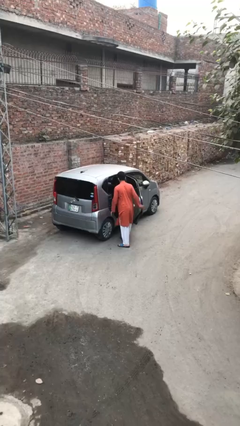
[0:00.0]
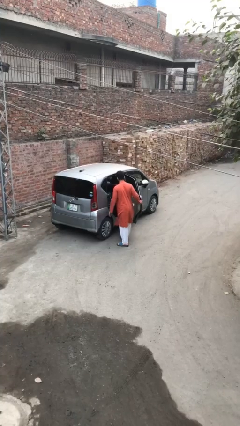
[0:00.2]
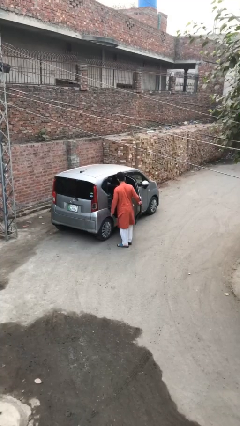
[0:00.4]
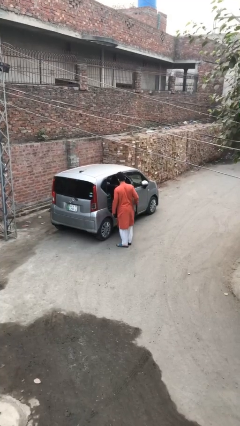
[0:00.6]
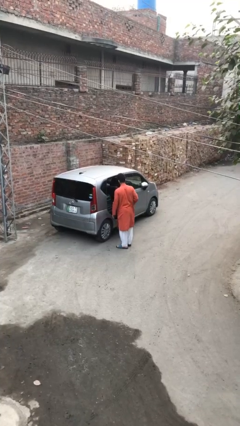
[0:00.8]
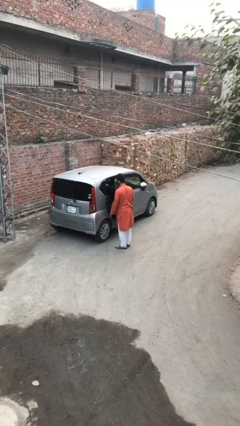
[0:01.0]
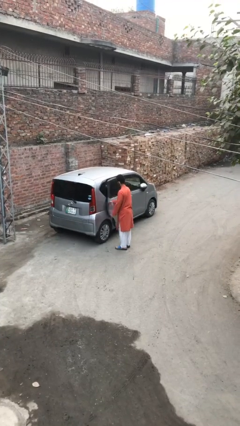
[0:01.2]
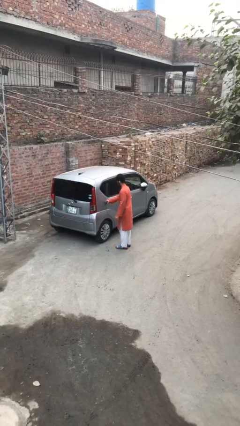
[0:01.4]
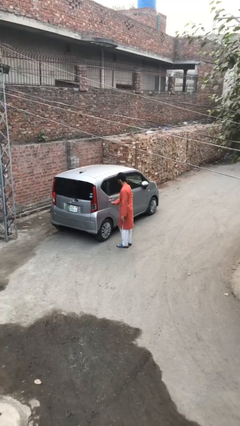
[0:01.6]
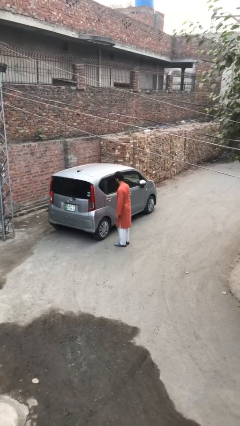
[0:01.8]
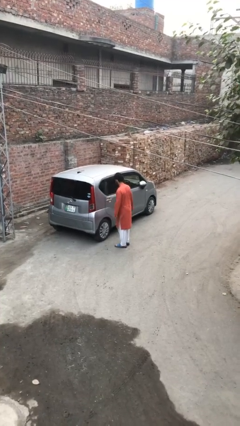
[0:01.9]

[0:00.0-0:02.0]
person closes car door

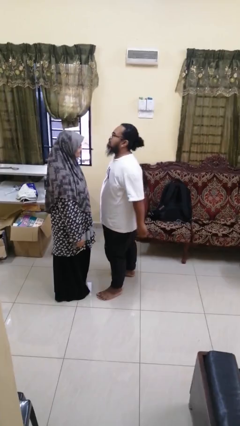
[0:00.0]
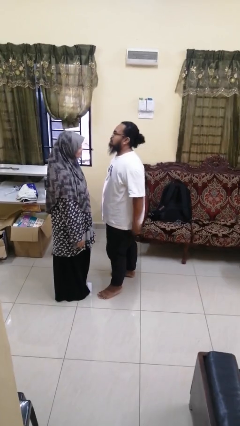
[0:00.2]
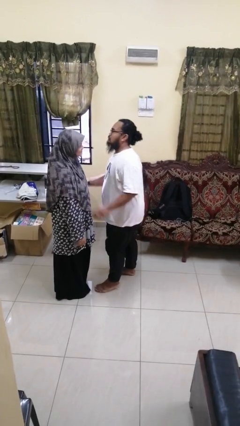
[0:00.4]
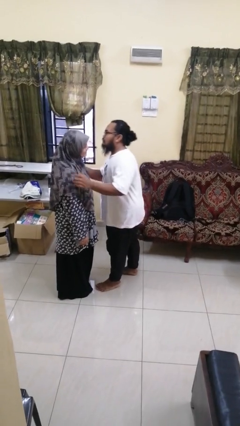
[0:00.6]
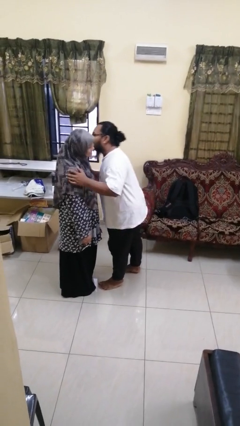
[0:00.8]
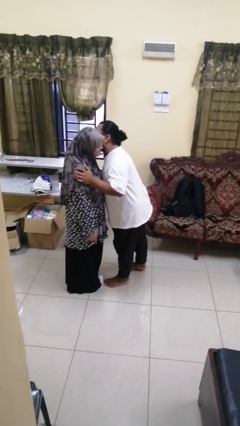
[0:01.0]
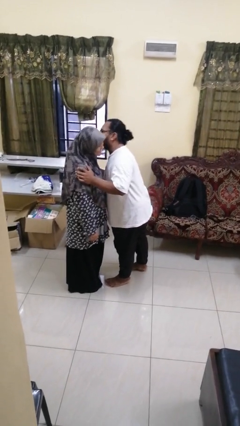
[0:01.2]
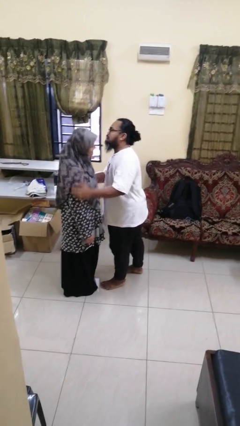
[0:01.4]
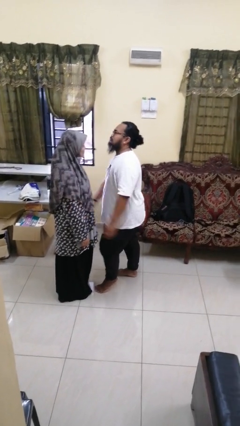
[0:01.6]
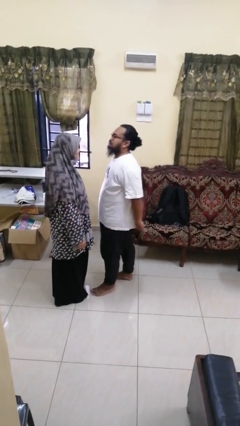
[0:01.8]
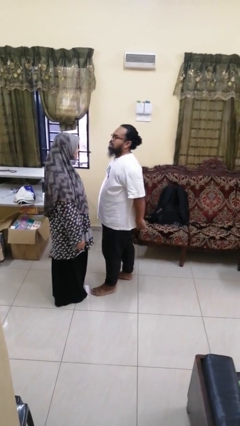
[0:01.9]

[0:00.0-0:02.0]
person kisses cheek of person

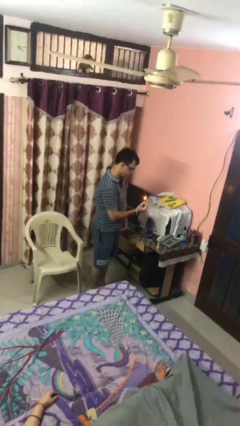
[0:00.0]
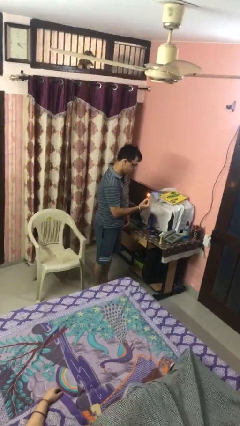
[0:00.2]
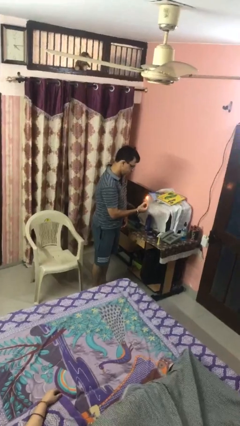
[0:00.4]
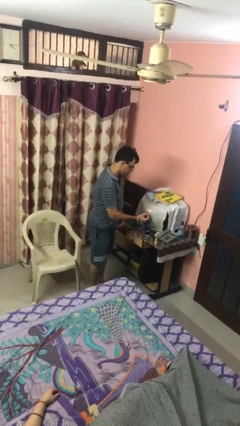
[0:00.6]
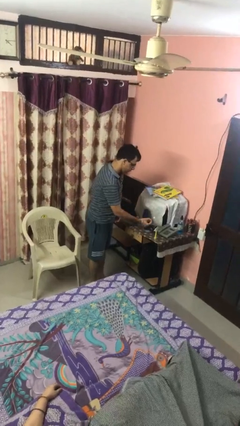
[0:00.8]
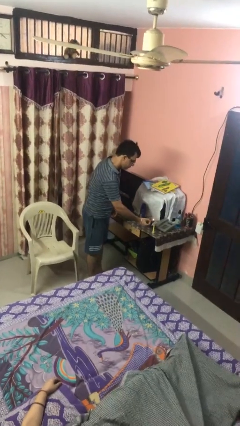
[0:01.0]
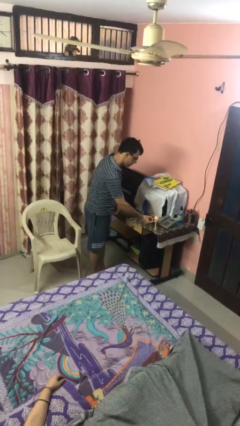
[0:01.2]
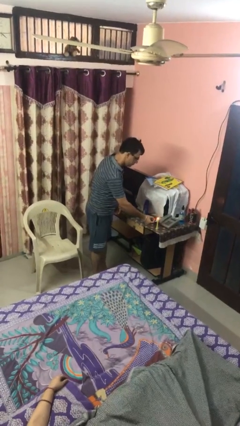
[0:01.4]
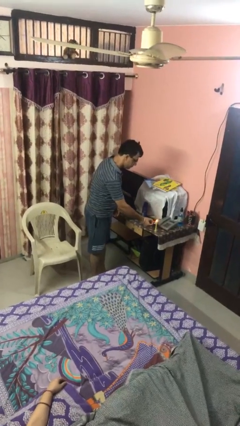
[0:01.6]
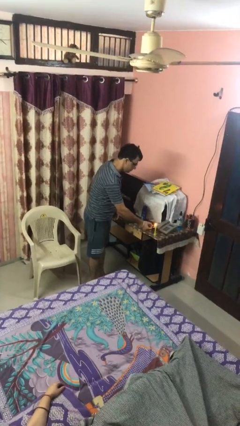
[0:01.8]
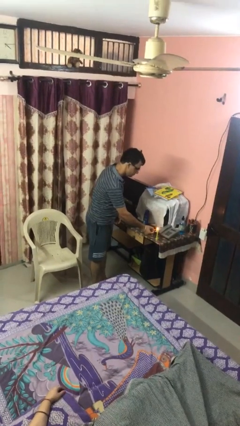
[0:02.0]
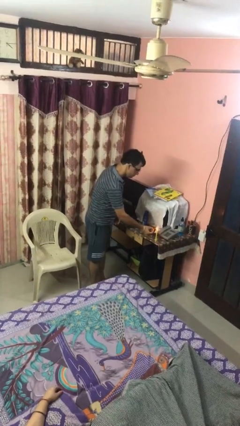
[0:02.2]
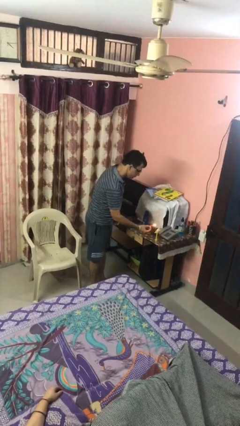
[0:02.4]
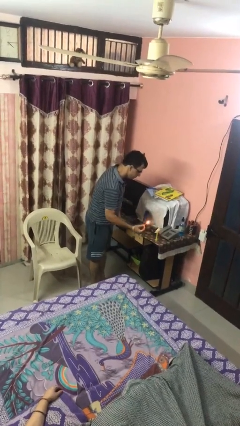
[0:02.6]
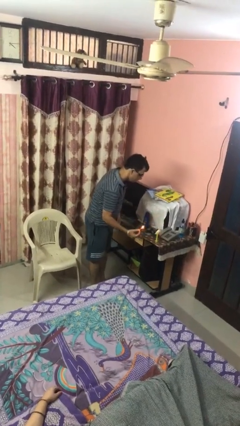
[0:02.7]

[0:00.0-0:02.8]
person lights candle

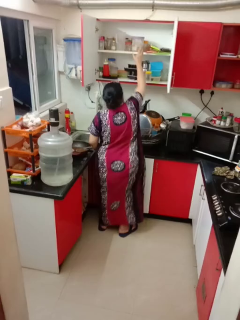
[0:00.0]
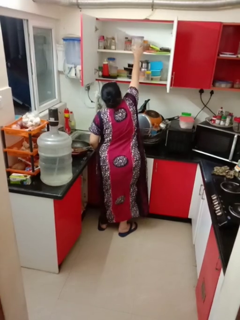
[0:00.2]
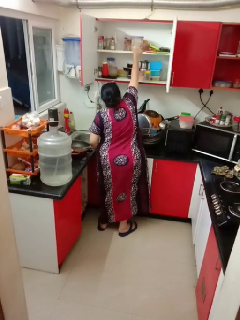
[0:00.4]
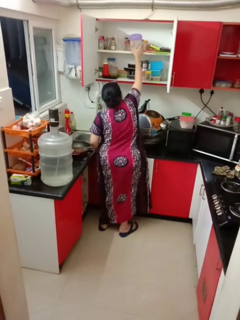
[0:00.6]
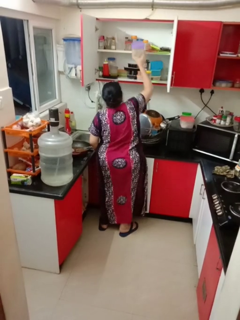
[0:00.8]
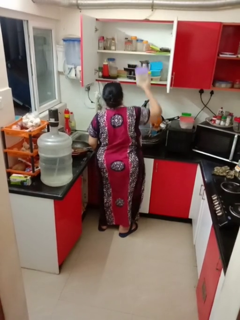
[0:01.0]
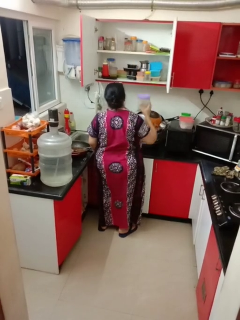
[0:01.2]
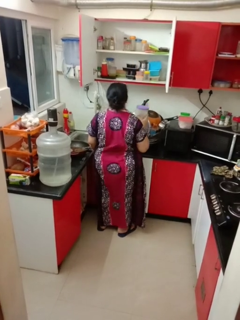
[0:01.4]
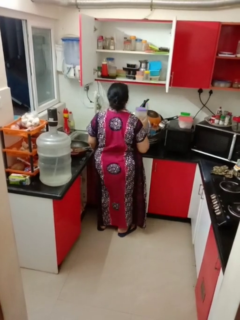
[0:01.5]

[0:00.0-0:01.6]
person takes object from cabinet

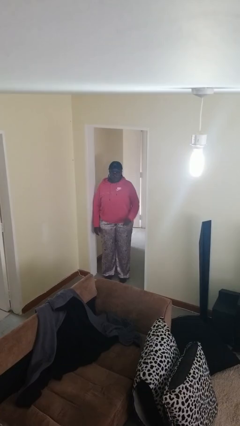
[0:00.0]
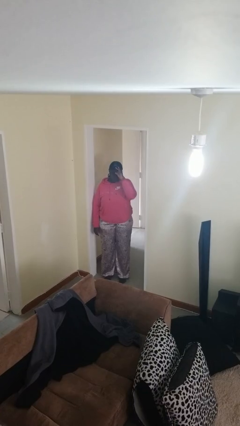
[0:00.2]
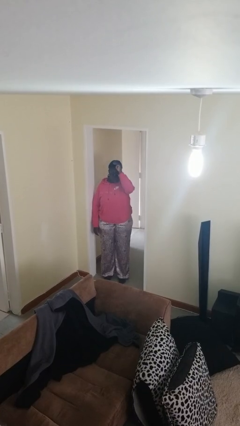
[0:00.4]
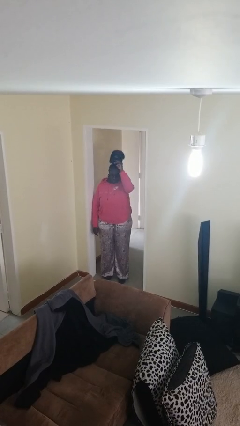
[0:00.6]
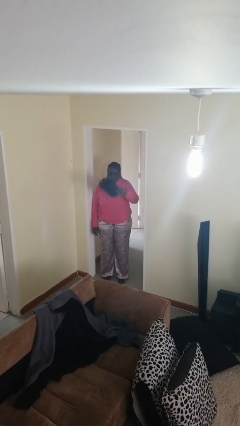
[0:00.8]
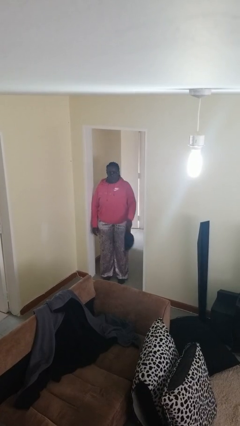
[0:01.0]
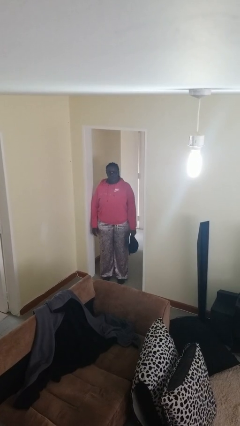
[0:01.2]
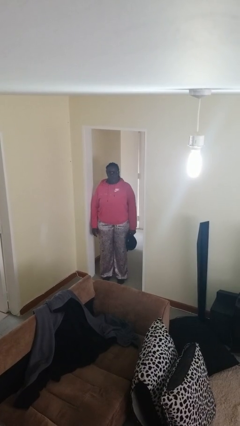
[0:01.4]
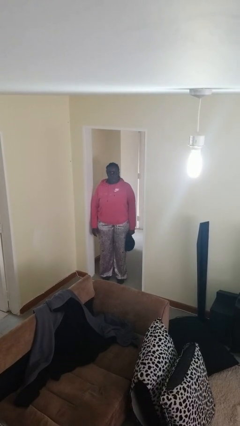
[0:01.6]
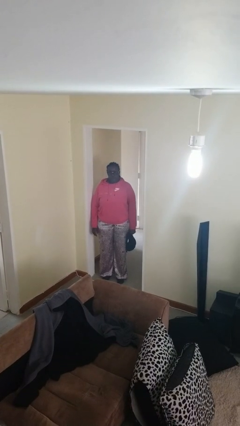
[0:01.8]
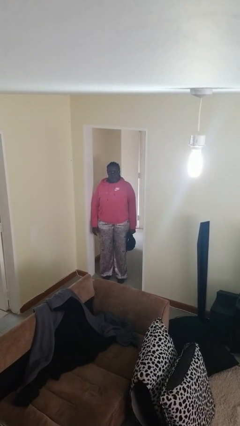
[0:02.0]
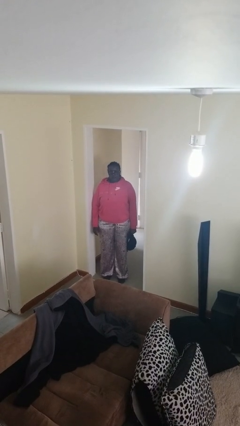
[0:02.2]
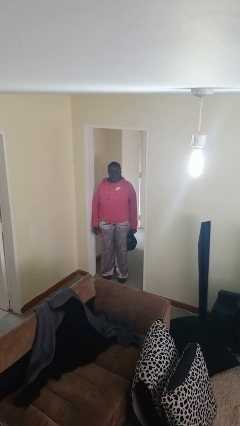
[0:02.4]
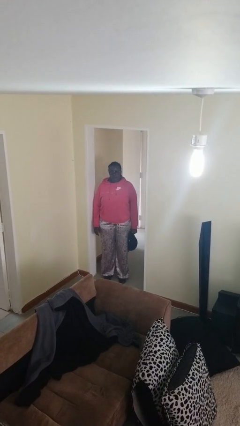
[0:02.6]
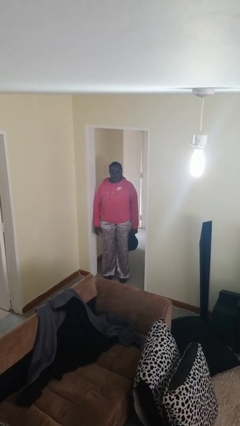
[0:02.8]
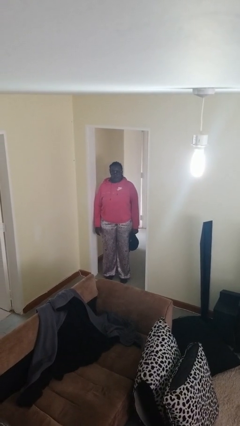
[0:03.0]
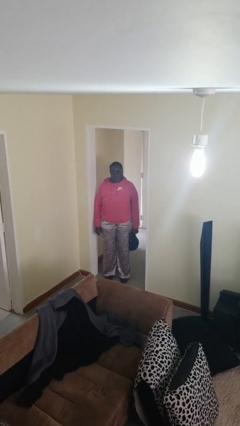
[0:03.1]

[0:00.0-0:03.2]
person takes off hat

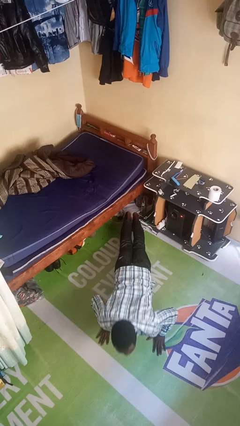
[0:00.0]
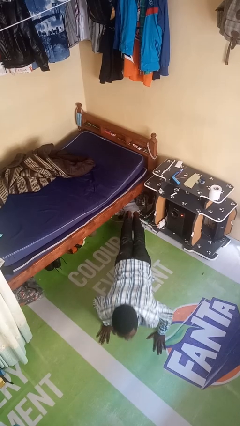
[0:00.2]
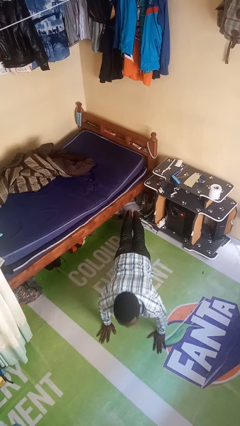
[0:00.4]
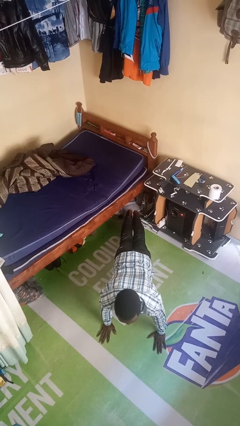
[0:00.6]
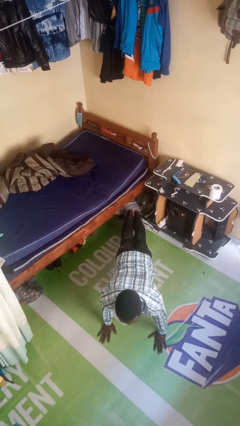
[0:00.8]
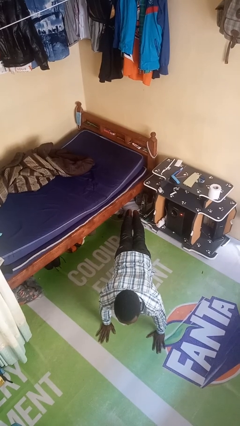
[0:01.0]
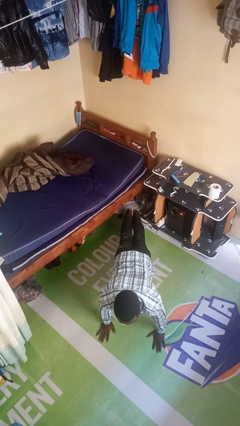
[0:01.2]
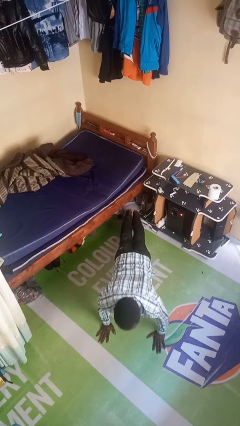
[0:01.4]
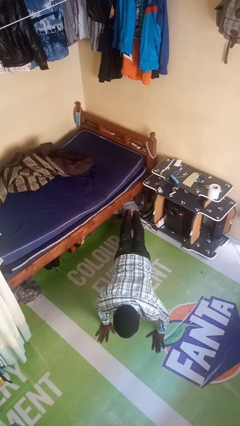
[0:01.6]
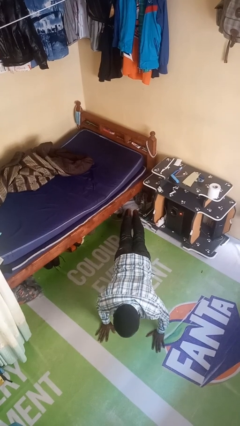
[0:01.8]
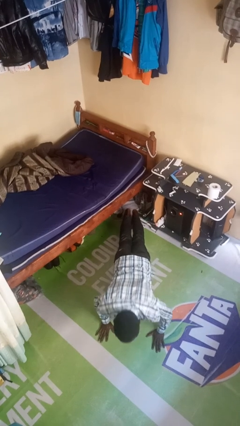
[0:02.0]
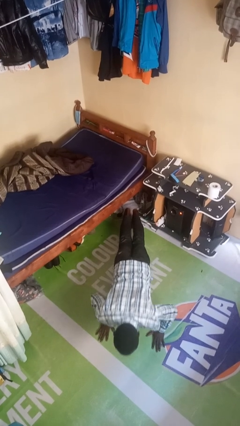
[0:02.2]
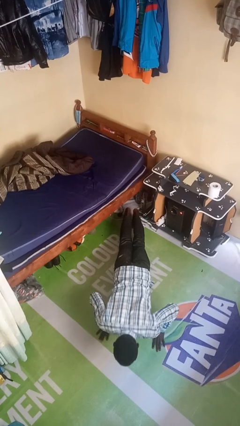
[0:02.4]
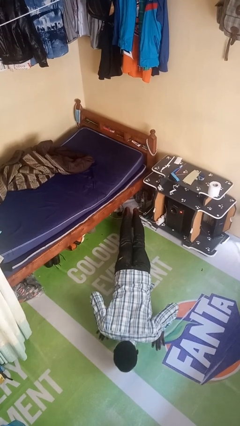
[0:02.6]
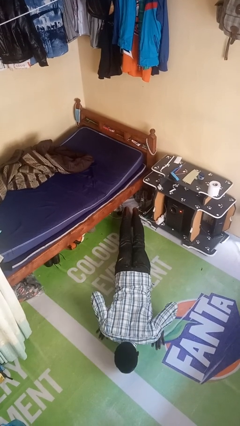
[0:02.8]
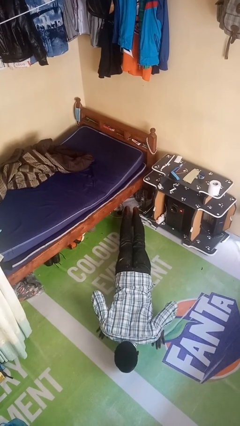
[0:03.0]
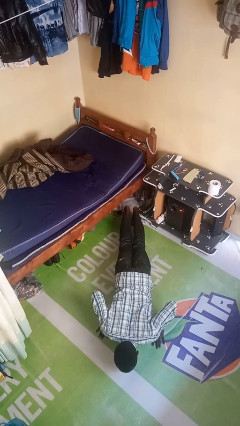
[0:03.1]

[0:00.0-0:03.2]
person exercises with pushup

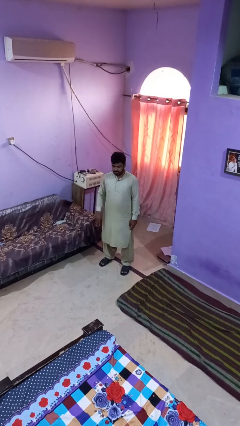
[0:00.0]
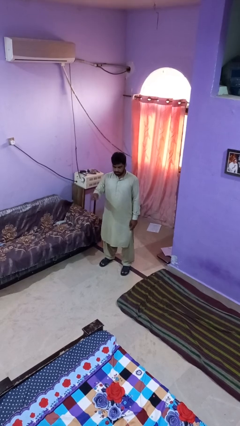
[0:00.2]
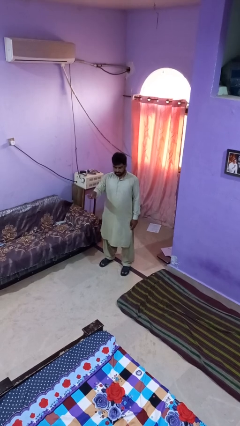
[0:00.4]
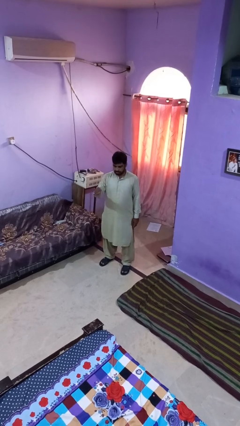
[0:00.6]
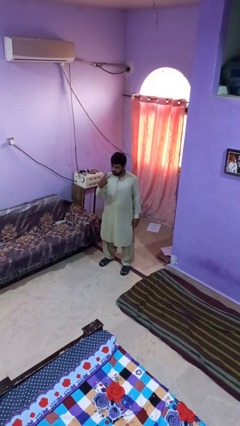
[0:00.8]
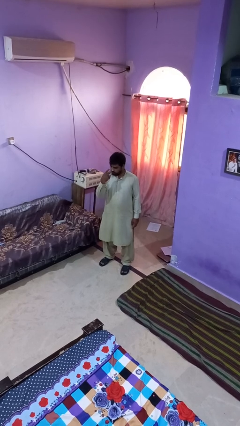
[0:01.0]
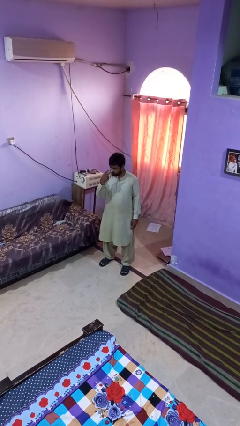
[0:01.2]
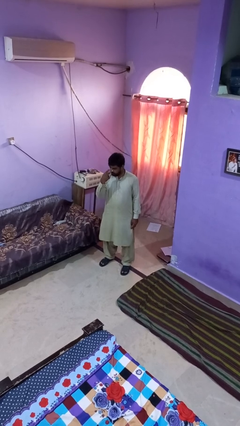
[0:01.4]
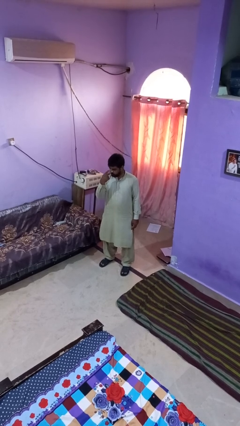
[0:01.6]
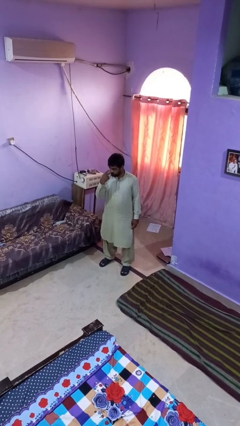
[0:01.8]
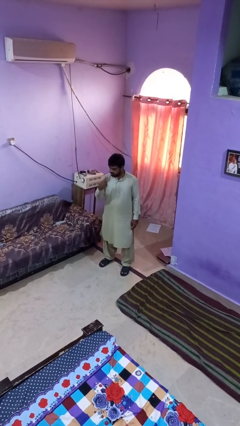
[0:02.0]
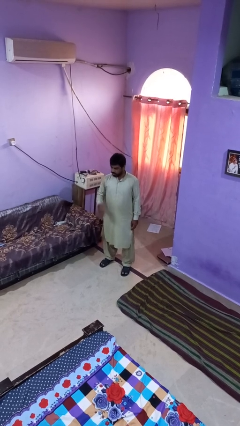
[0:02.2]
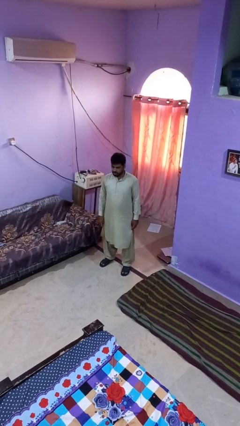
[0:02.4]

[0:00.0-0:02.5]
person gestures watch closely

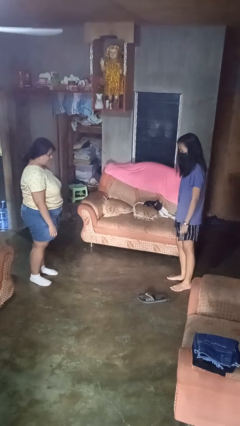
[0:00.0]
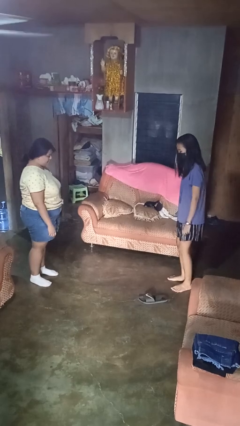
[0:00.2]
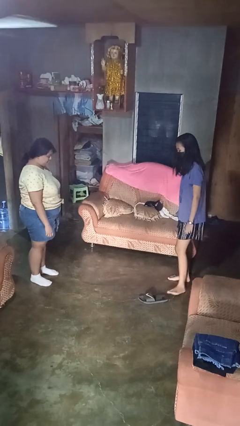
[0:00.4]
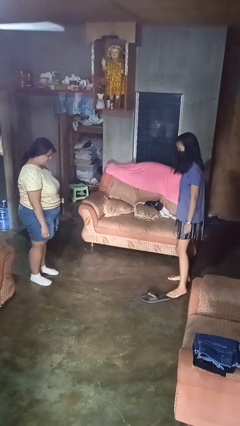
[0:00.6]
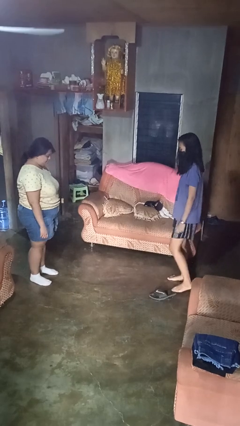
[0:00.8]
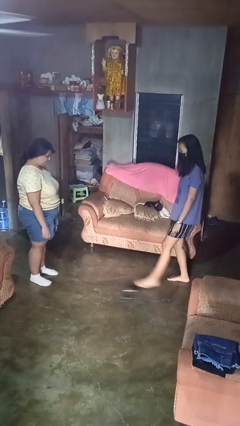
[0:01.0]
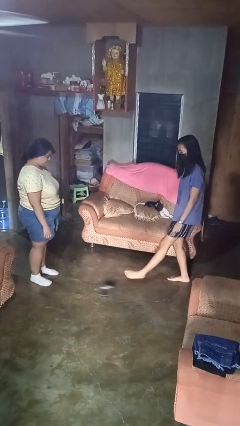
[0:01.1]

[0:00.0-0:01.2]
person kicks object to person
